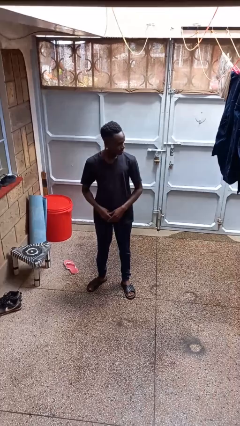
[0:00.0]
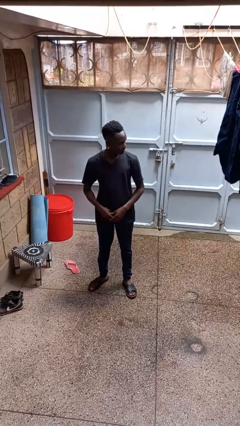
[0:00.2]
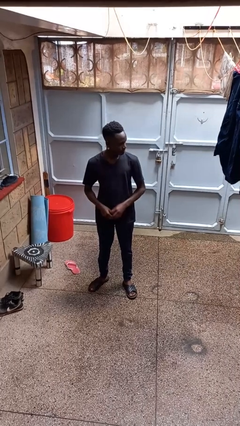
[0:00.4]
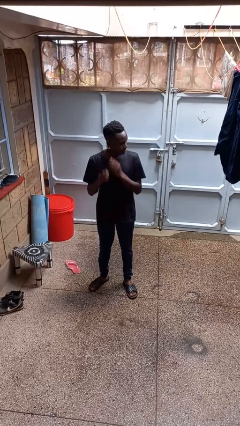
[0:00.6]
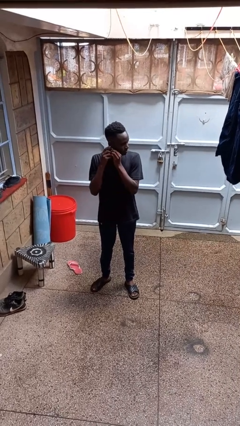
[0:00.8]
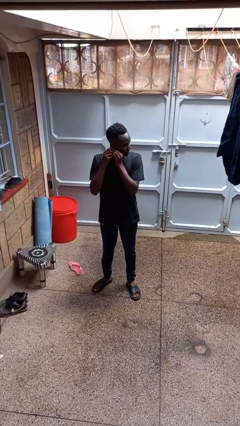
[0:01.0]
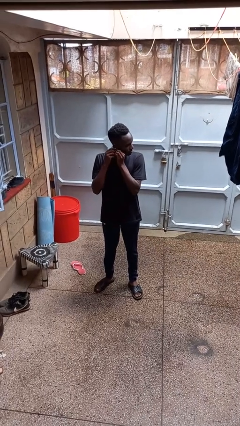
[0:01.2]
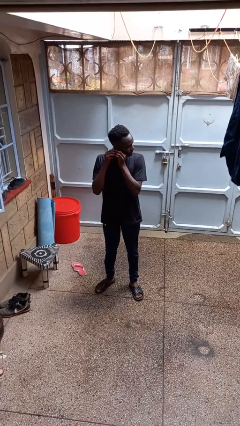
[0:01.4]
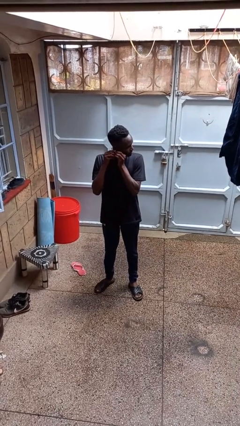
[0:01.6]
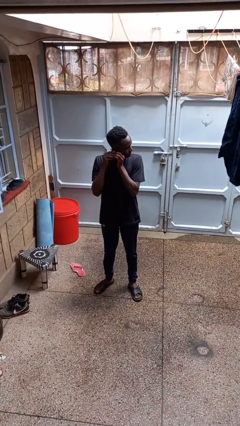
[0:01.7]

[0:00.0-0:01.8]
person takes off earrings

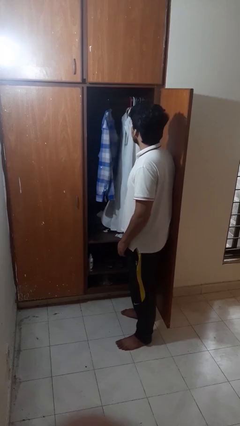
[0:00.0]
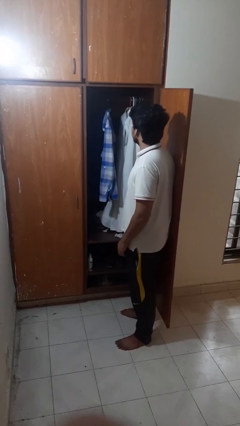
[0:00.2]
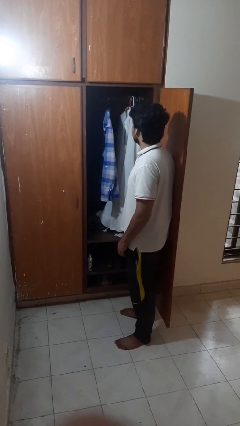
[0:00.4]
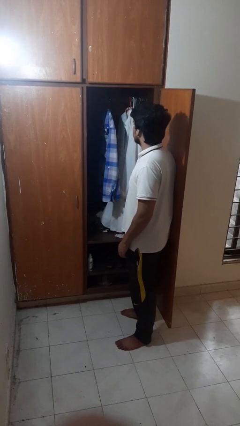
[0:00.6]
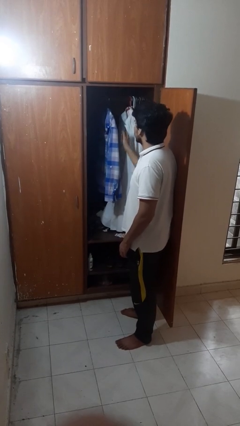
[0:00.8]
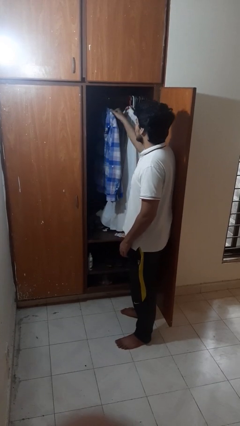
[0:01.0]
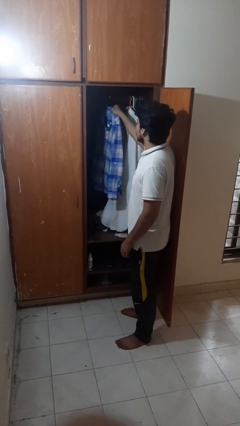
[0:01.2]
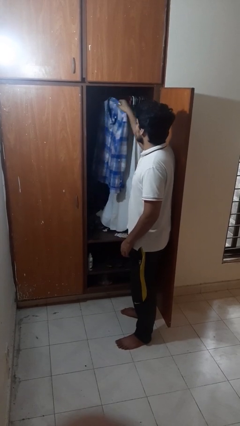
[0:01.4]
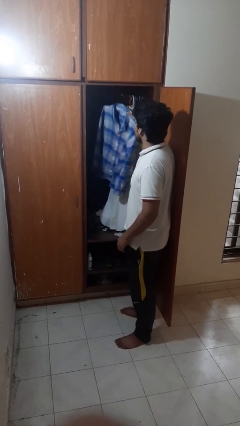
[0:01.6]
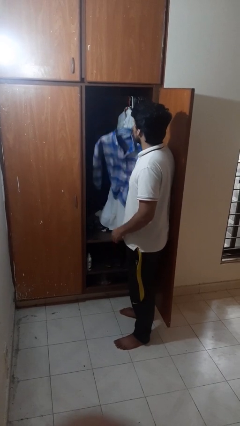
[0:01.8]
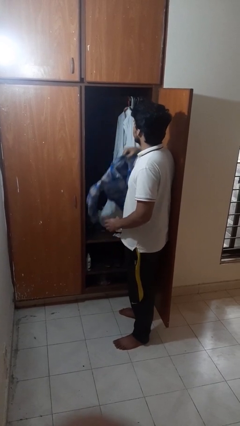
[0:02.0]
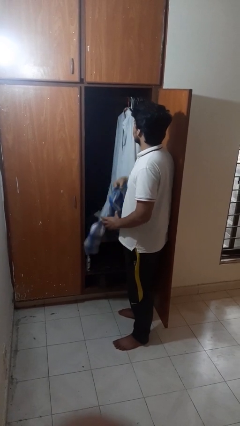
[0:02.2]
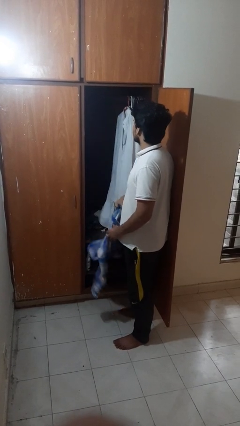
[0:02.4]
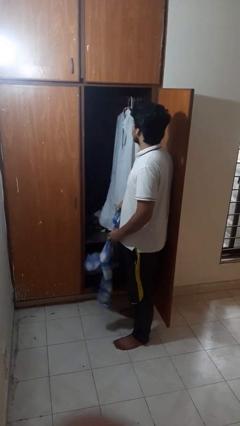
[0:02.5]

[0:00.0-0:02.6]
person takes clothes from closet

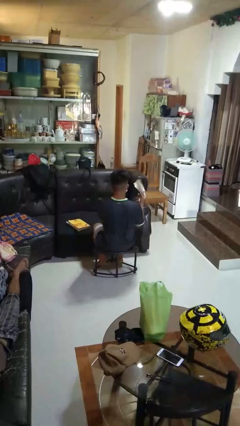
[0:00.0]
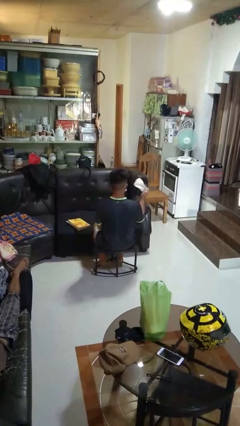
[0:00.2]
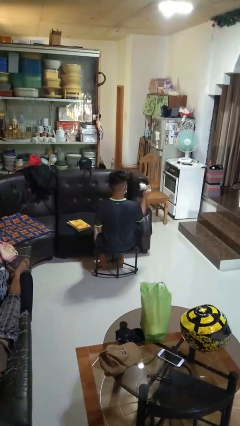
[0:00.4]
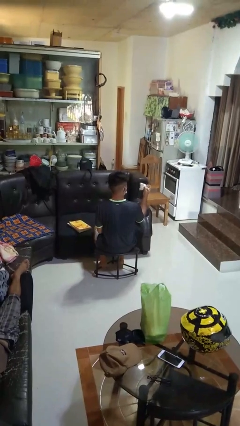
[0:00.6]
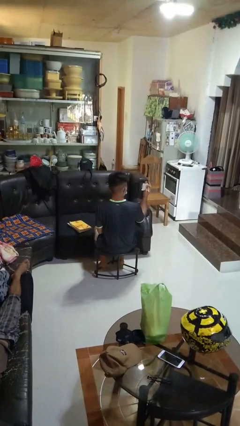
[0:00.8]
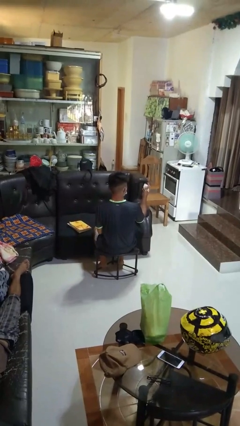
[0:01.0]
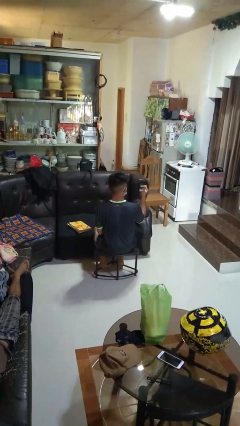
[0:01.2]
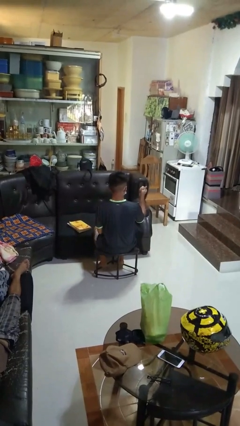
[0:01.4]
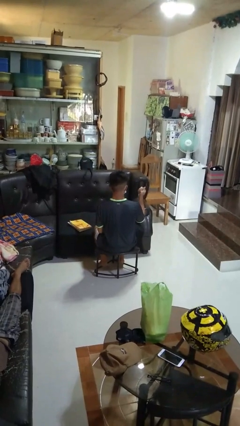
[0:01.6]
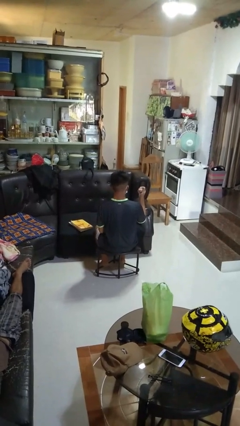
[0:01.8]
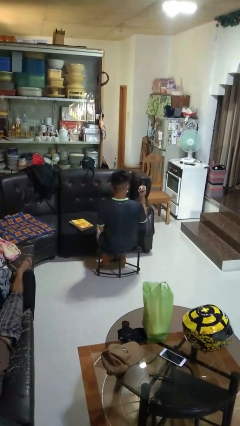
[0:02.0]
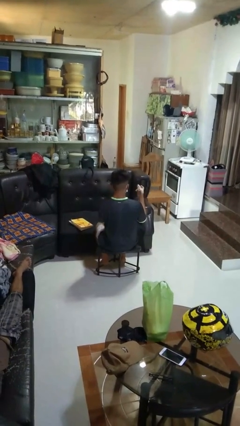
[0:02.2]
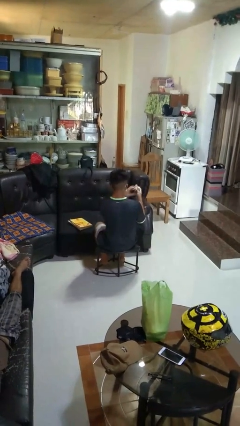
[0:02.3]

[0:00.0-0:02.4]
person crumples paper

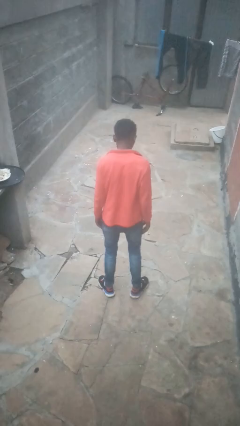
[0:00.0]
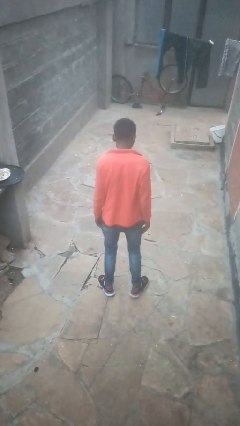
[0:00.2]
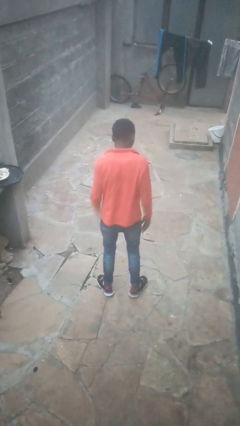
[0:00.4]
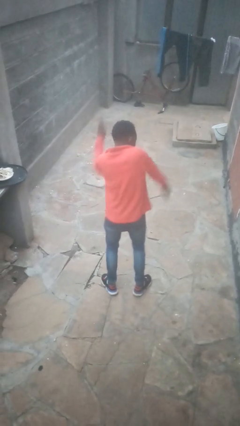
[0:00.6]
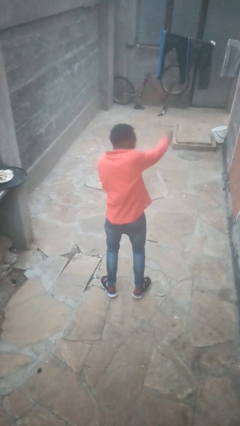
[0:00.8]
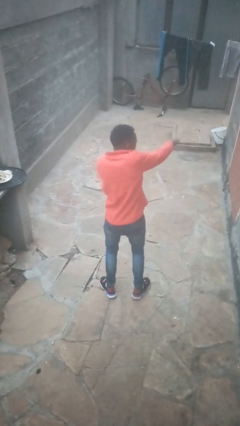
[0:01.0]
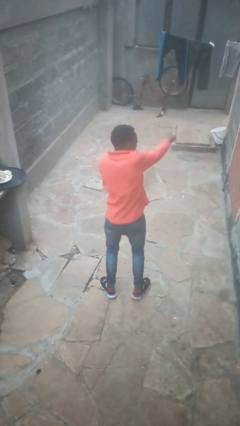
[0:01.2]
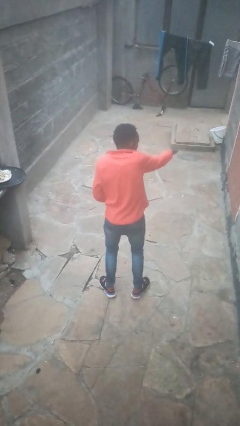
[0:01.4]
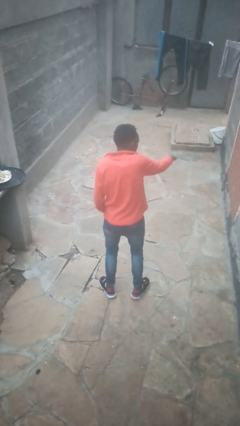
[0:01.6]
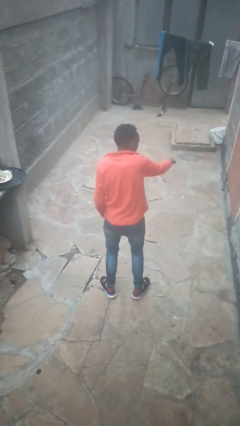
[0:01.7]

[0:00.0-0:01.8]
person swats bug

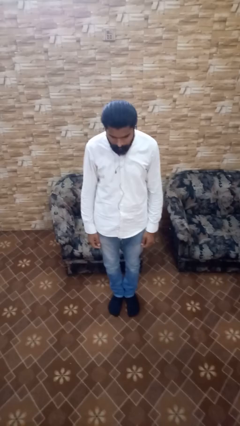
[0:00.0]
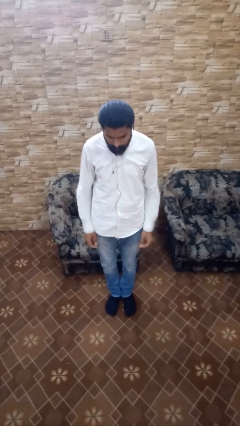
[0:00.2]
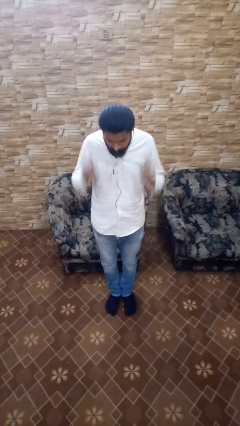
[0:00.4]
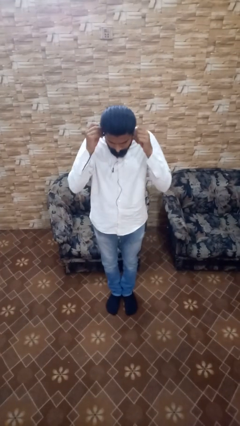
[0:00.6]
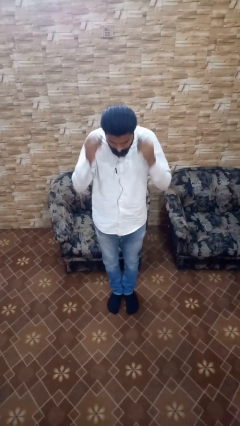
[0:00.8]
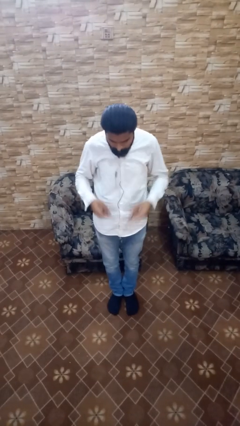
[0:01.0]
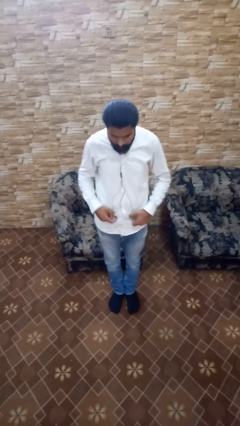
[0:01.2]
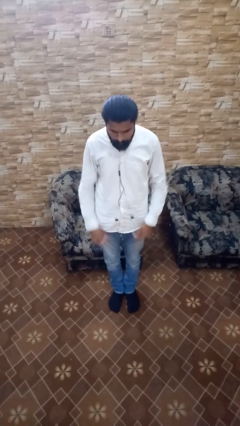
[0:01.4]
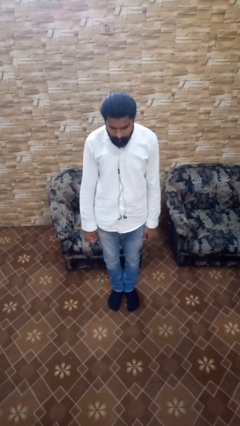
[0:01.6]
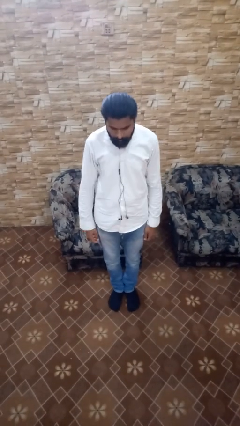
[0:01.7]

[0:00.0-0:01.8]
person takes off headphones

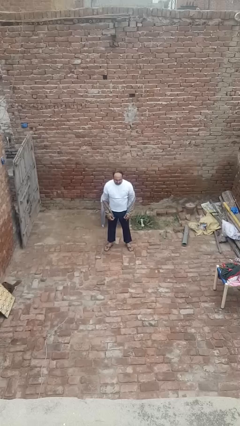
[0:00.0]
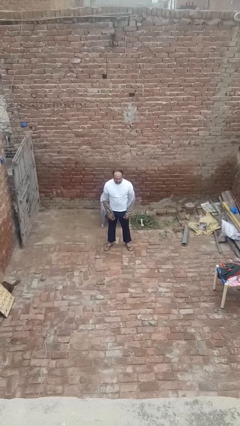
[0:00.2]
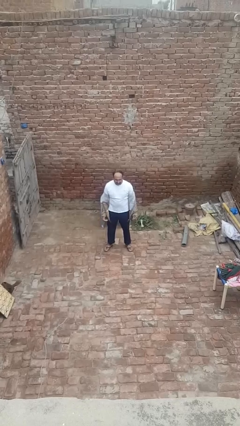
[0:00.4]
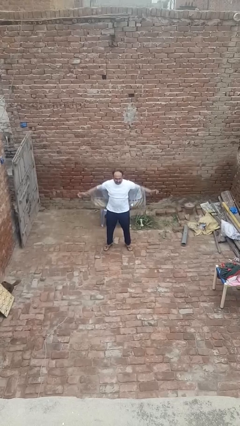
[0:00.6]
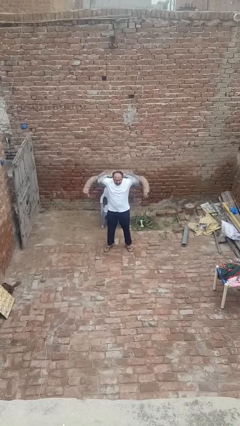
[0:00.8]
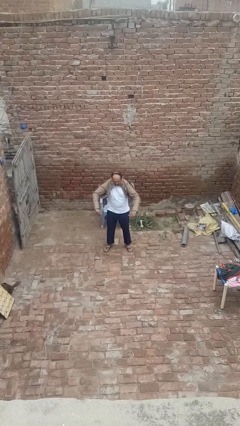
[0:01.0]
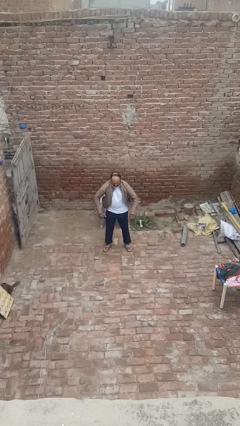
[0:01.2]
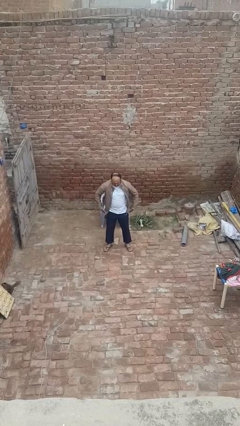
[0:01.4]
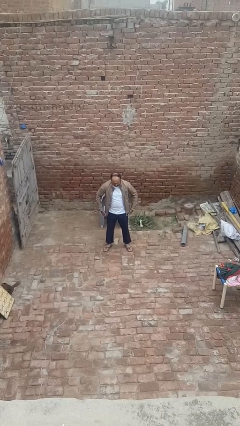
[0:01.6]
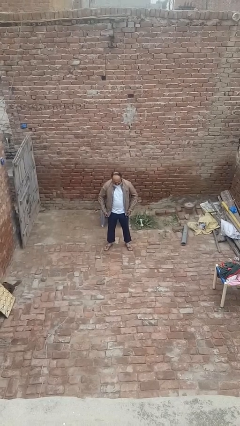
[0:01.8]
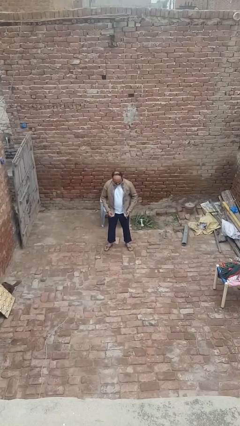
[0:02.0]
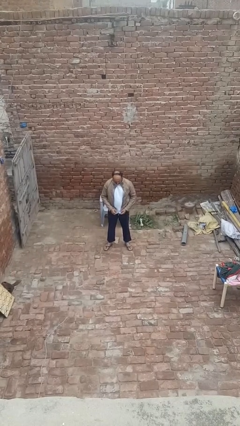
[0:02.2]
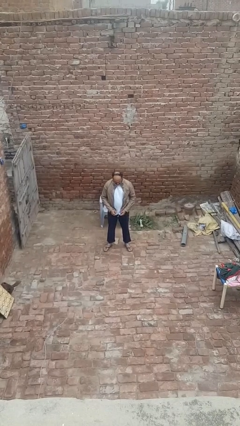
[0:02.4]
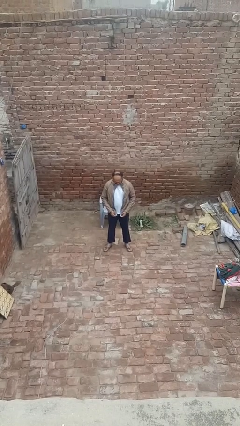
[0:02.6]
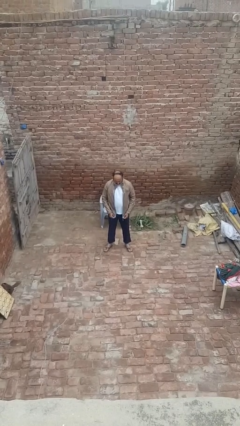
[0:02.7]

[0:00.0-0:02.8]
person puts on jacket

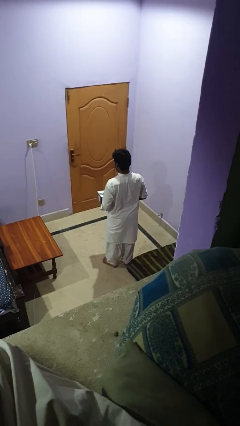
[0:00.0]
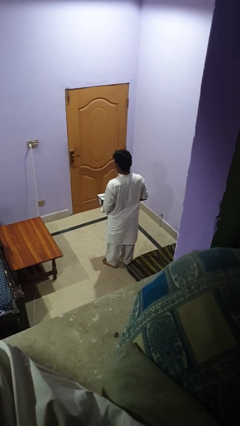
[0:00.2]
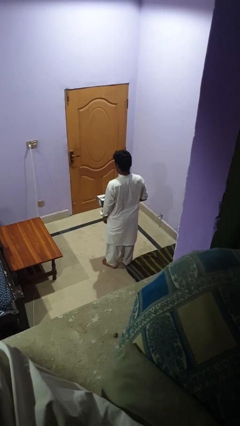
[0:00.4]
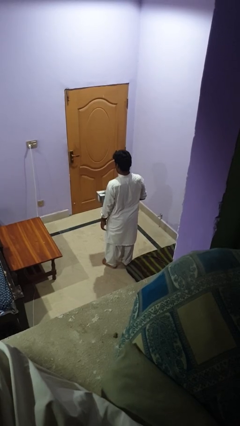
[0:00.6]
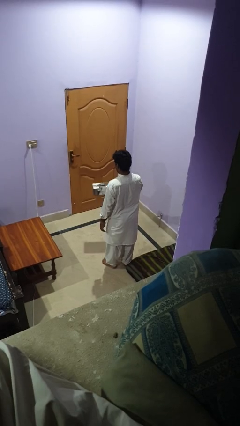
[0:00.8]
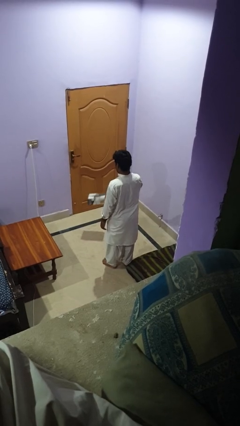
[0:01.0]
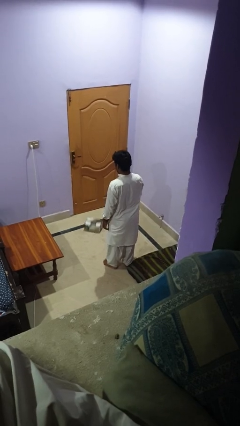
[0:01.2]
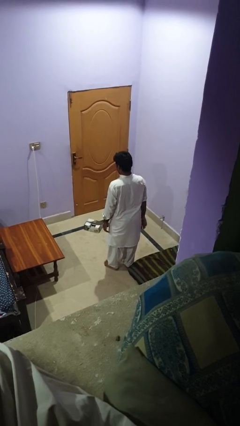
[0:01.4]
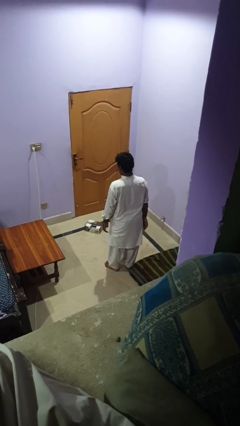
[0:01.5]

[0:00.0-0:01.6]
person throws object to ground

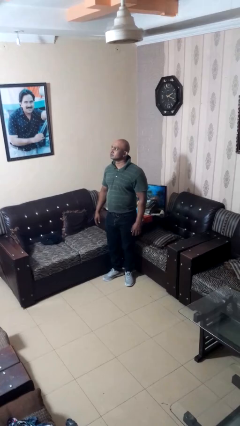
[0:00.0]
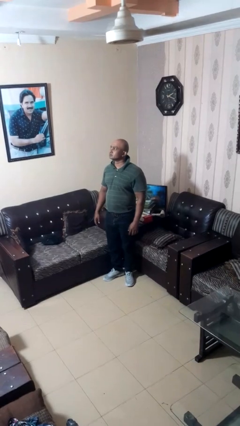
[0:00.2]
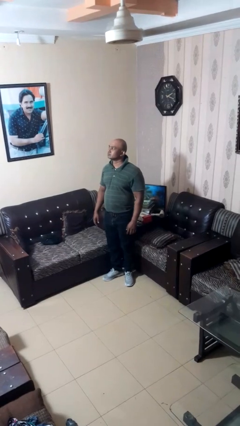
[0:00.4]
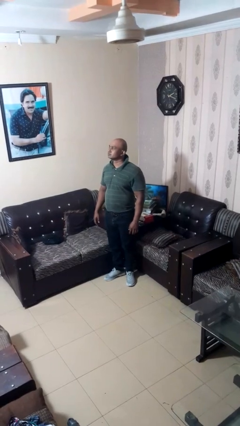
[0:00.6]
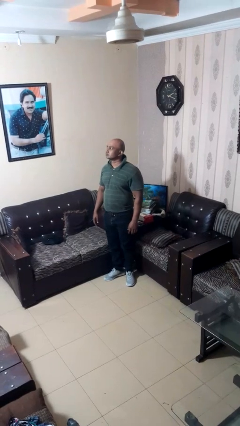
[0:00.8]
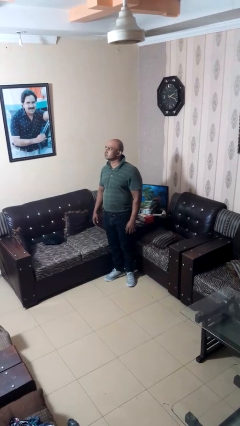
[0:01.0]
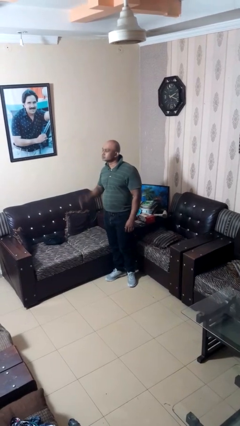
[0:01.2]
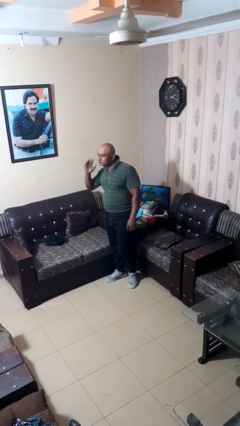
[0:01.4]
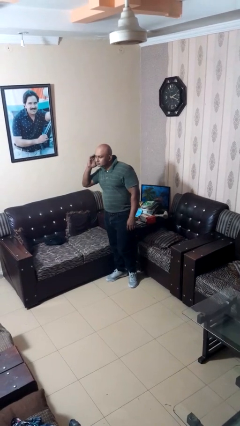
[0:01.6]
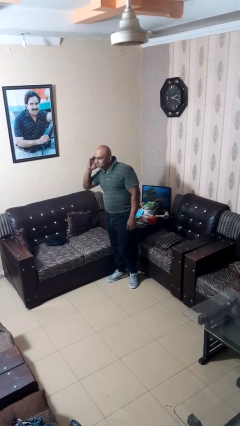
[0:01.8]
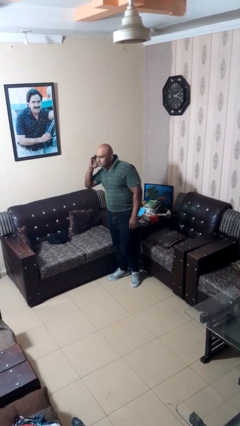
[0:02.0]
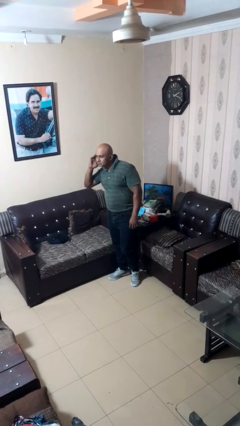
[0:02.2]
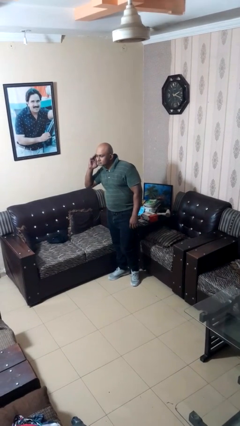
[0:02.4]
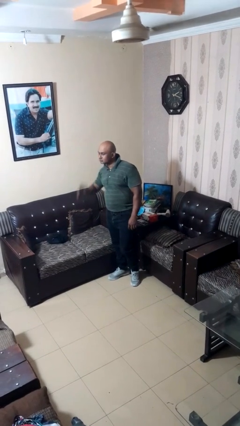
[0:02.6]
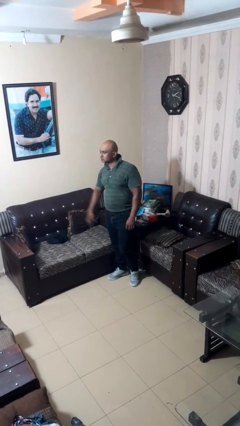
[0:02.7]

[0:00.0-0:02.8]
person gestures listen closely
